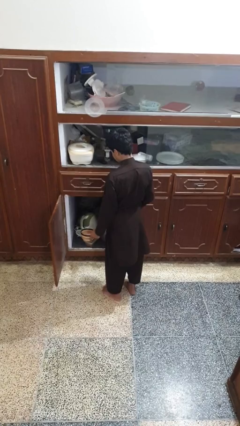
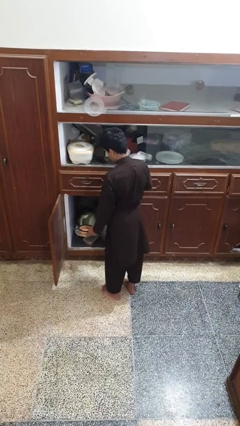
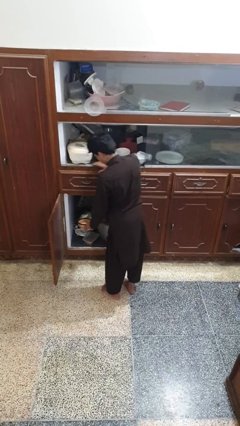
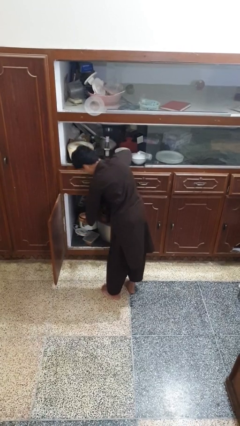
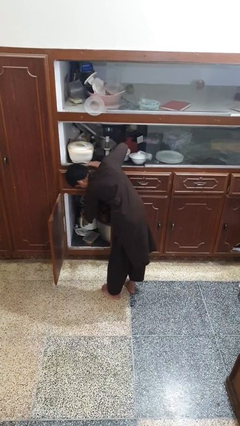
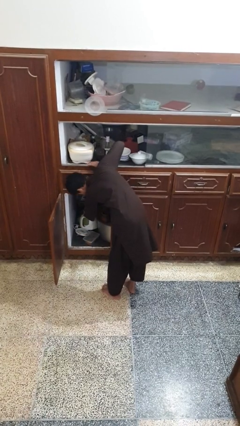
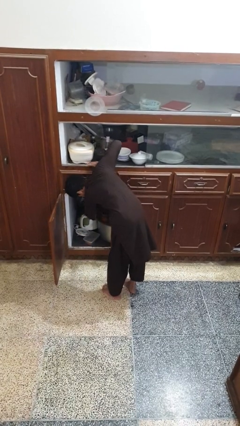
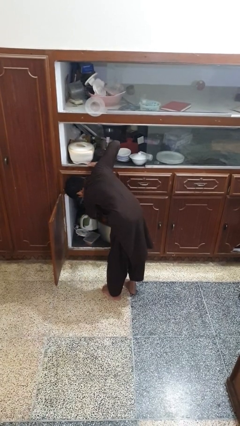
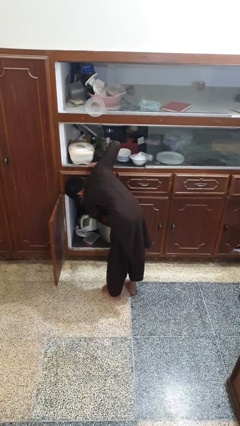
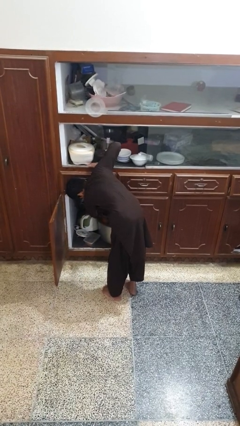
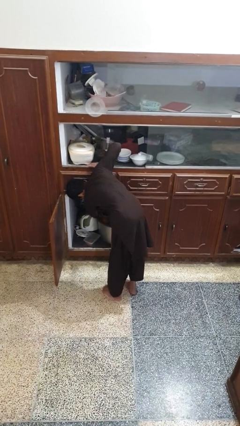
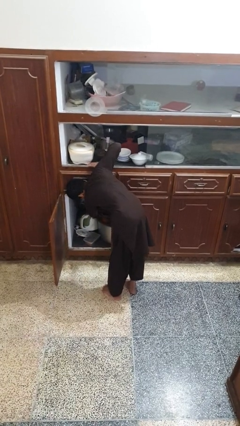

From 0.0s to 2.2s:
person puts object in cabinet

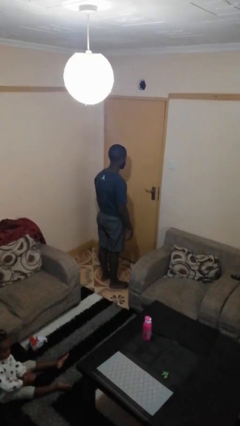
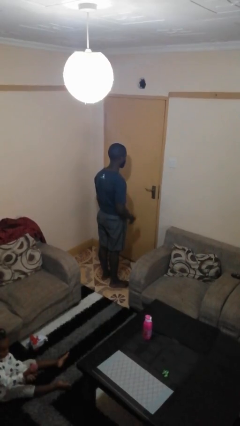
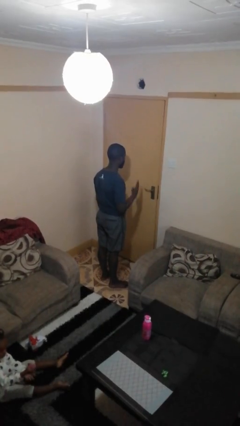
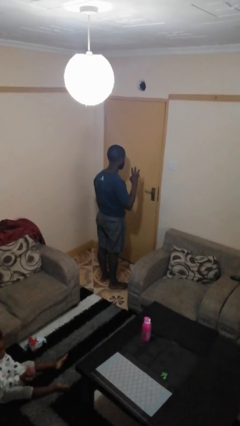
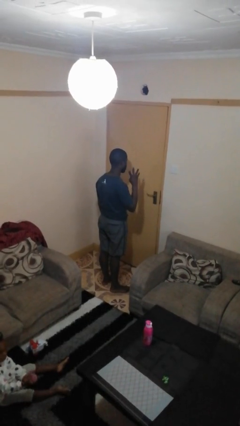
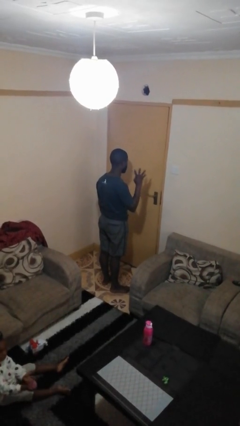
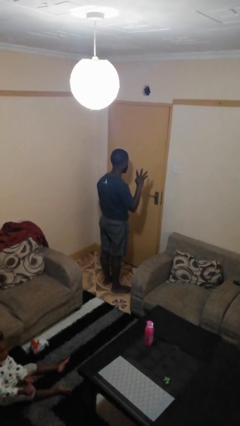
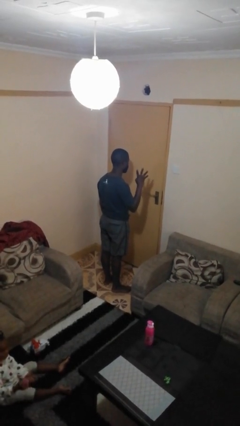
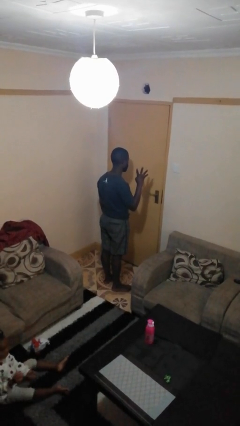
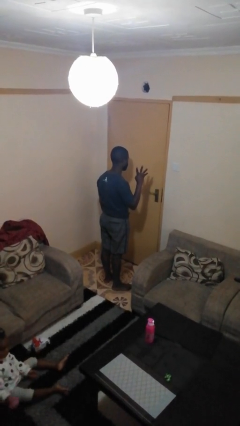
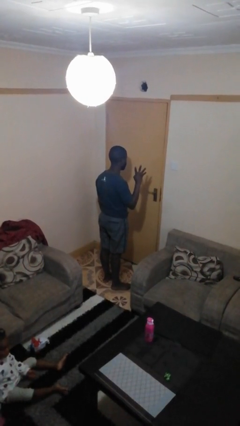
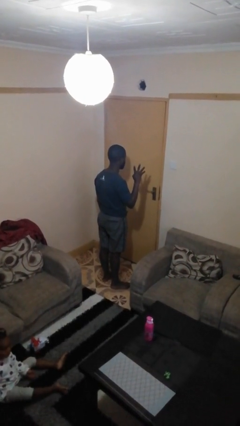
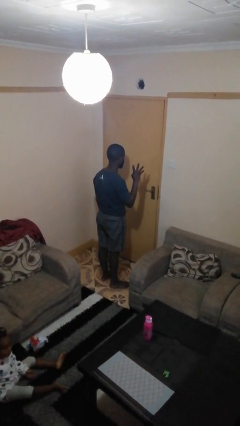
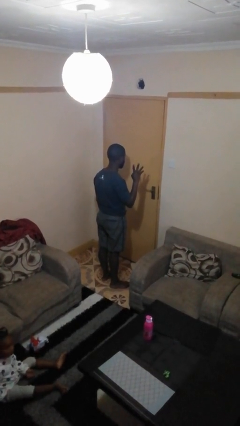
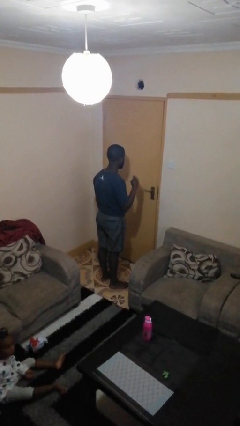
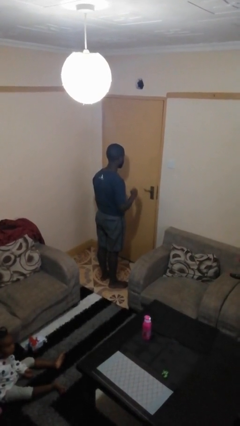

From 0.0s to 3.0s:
person gestures number four

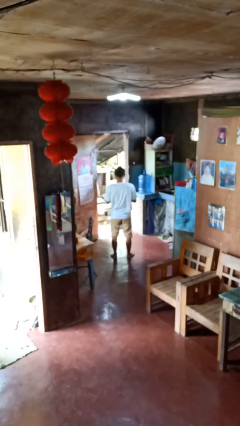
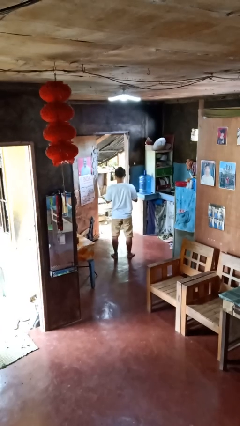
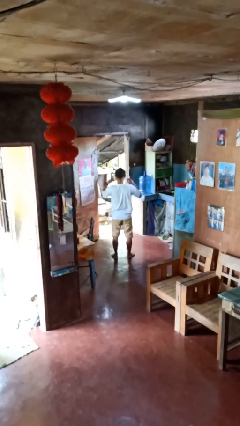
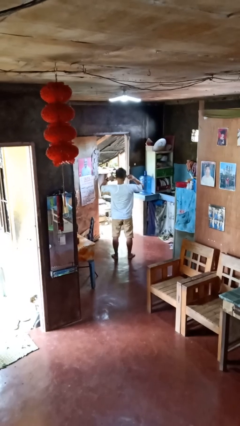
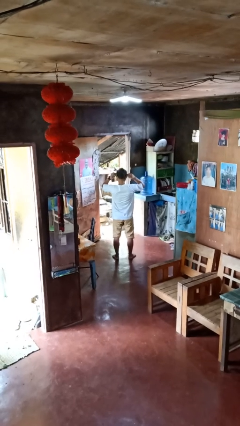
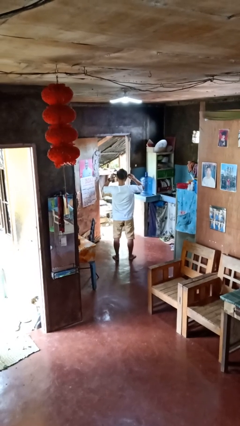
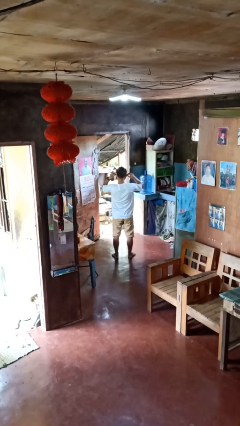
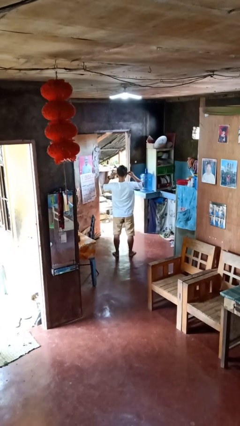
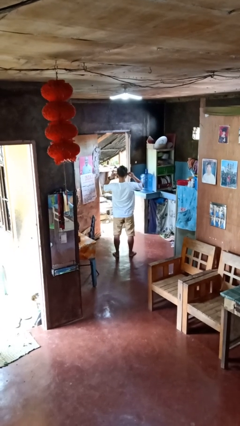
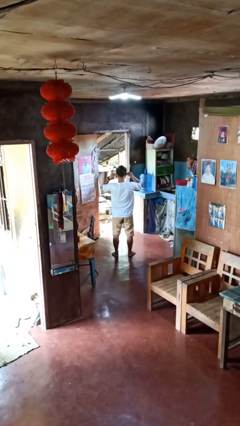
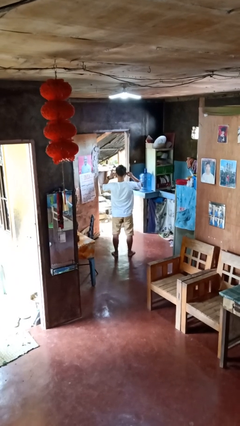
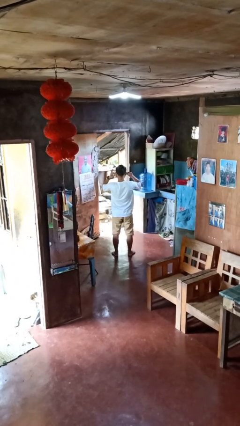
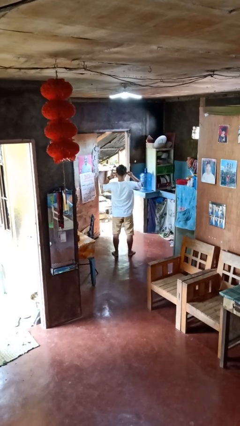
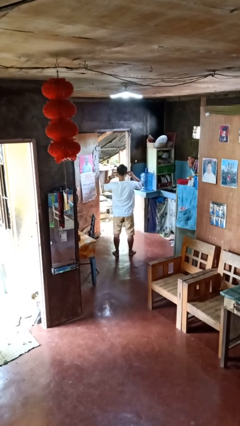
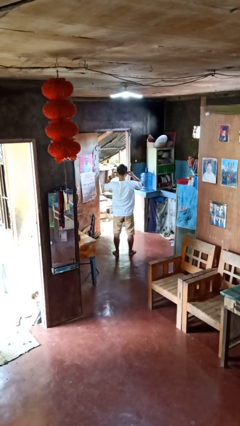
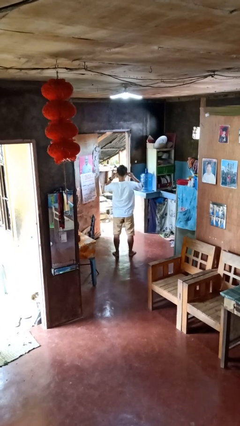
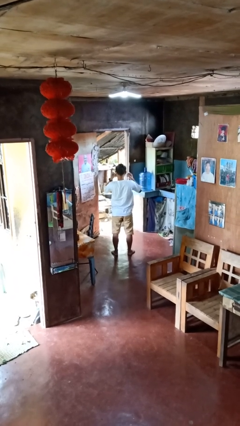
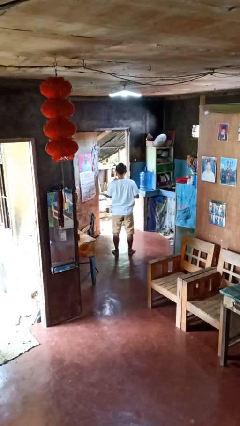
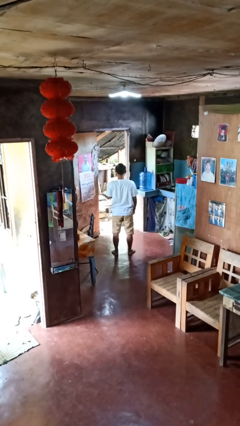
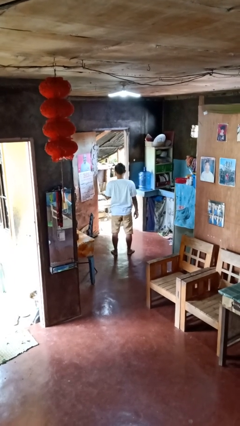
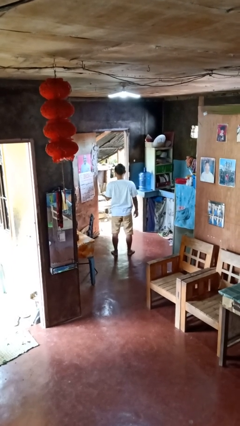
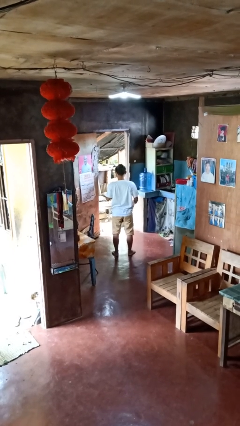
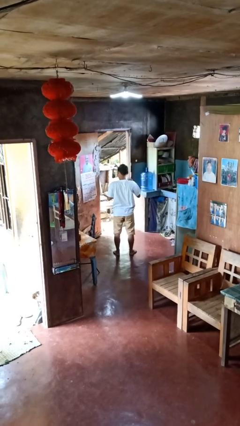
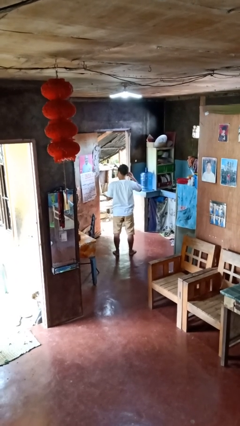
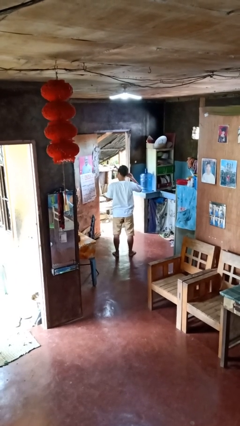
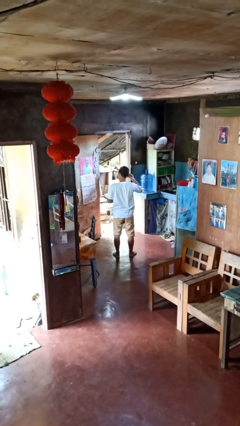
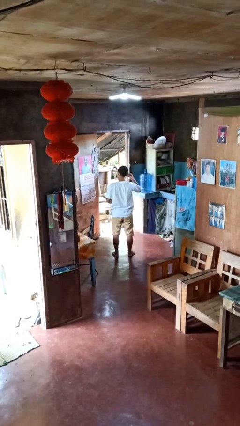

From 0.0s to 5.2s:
person puts on headphones

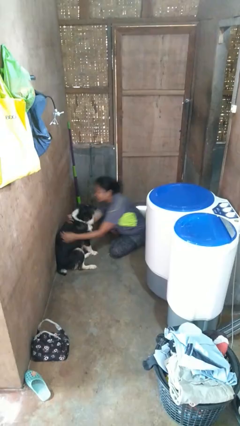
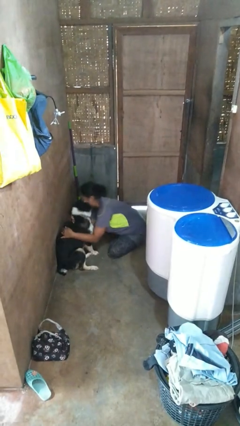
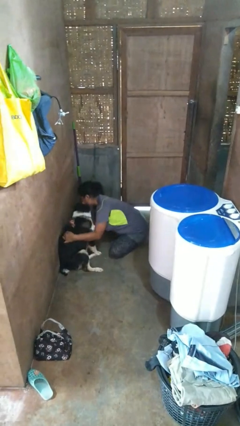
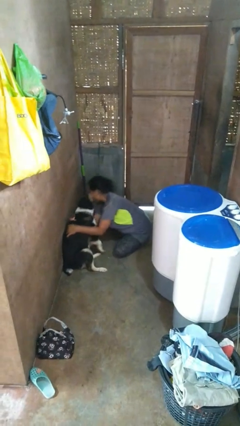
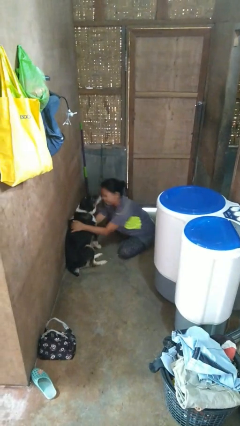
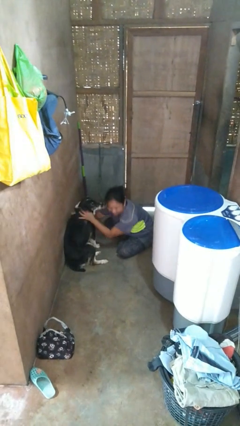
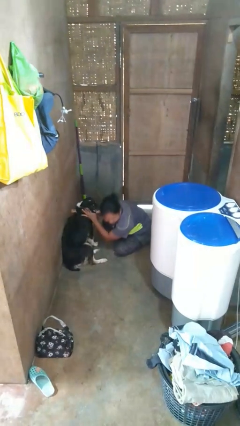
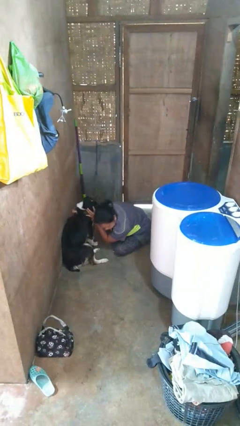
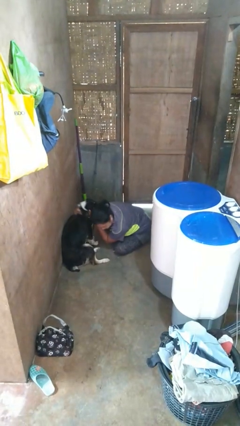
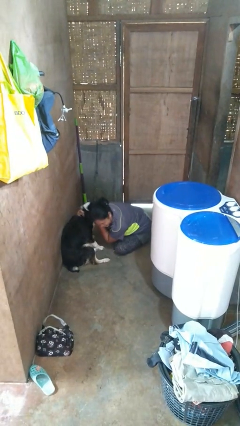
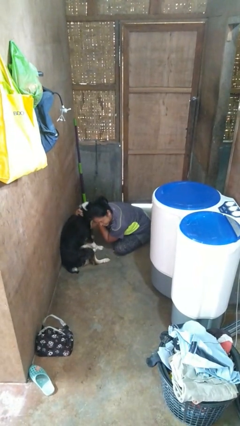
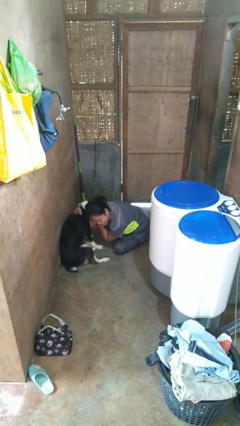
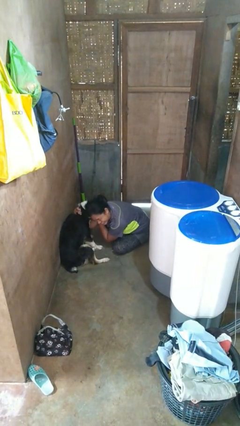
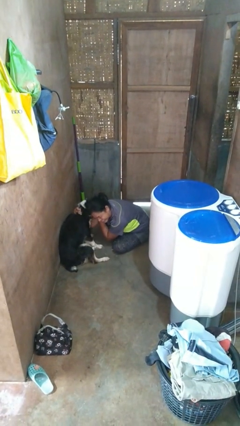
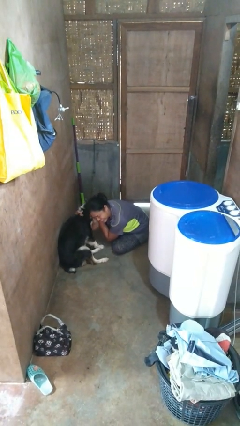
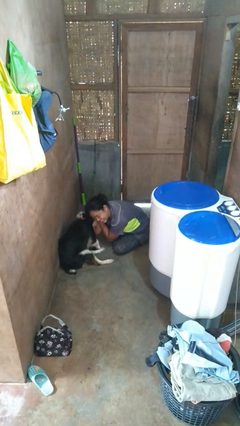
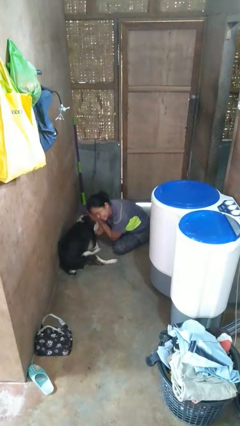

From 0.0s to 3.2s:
person hugs dog

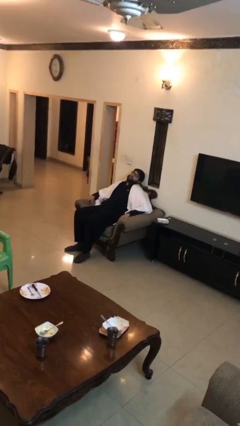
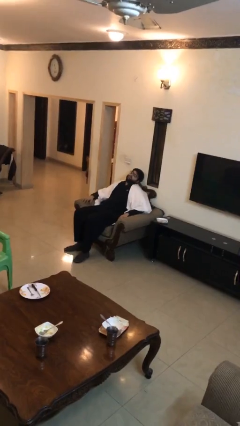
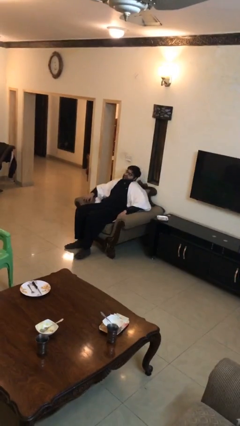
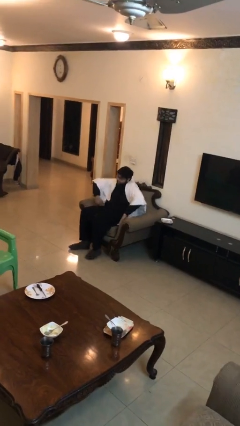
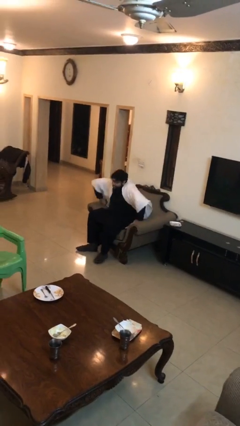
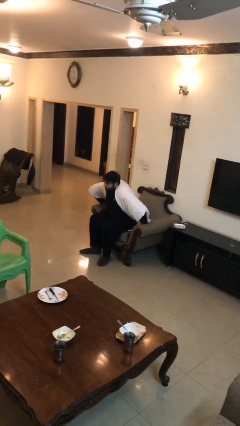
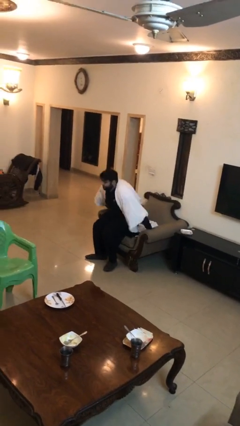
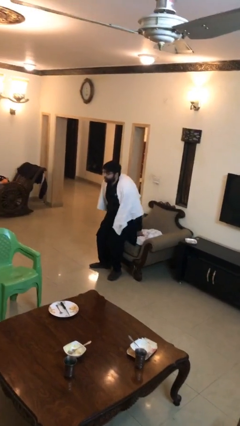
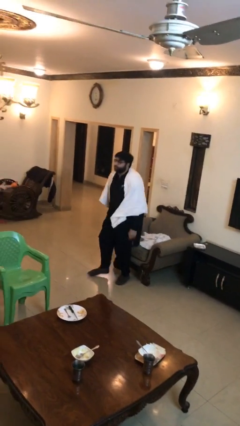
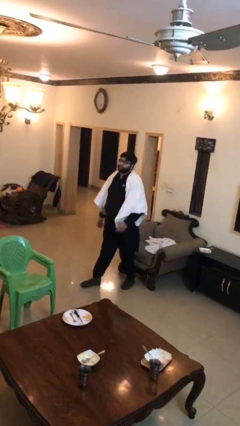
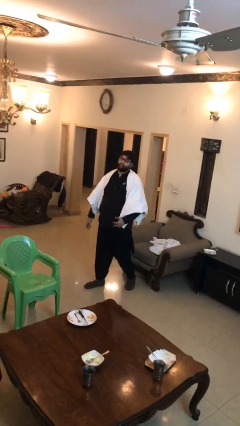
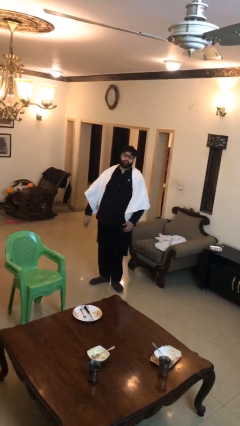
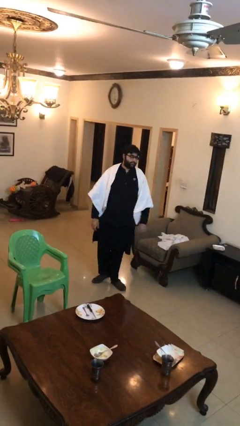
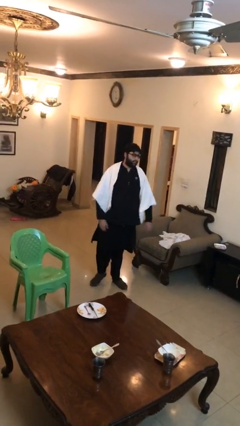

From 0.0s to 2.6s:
person stands up

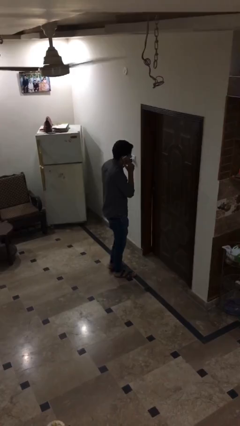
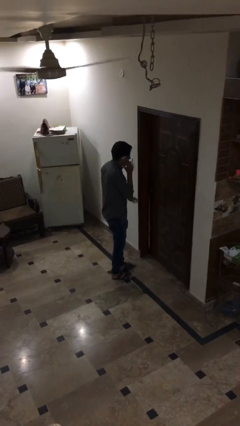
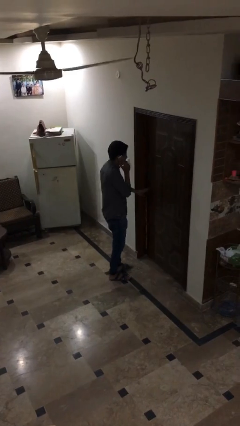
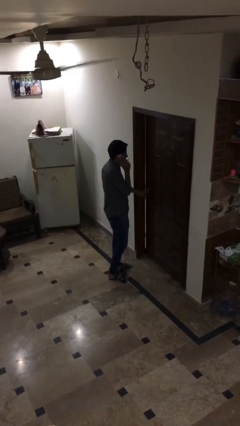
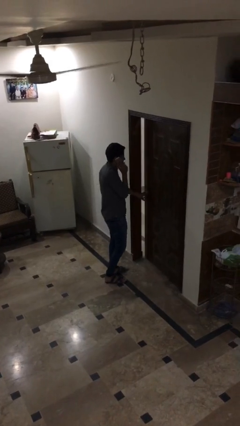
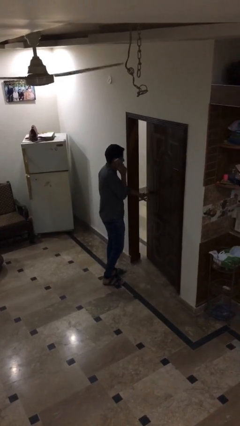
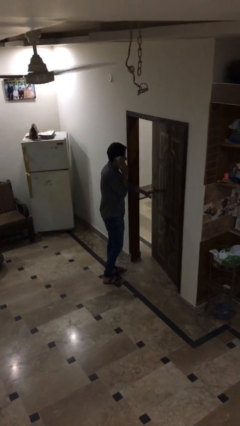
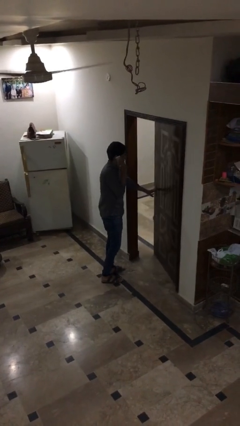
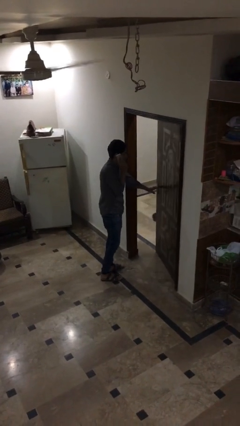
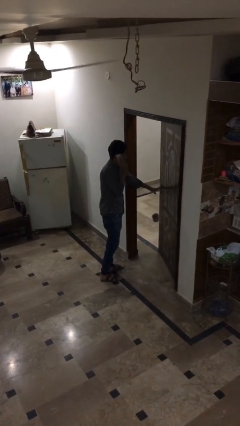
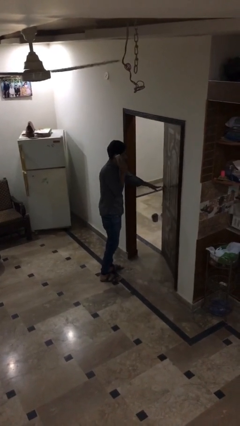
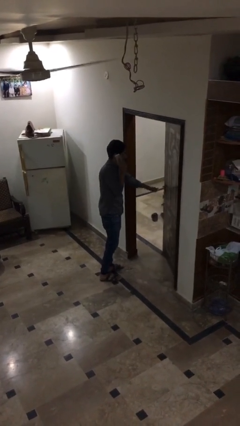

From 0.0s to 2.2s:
person opens facility door
